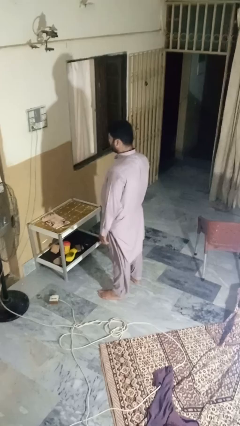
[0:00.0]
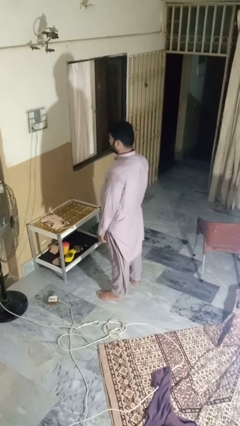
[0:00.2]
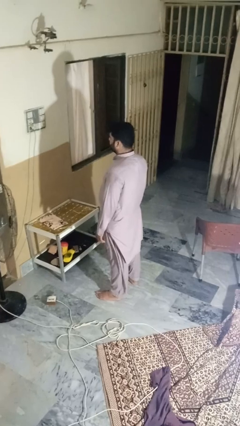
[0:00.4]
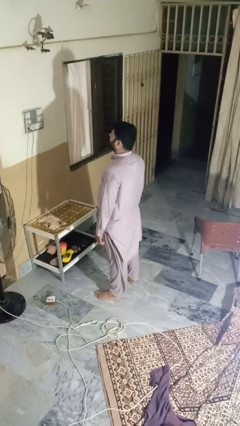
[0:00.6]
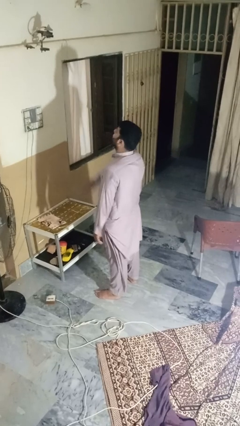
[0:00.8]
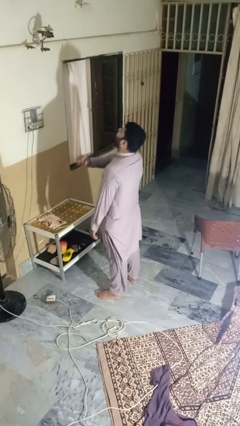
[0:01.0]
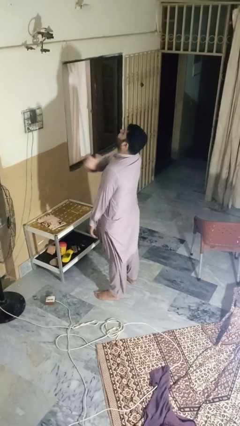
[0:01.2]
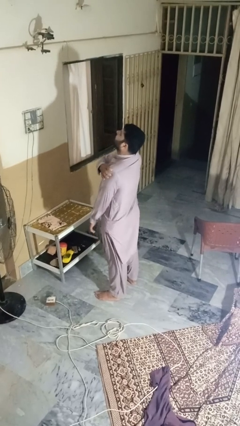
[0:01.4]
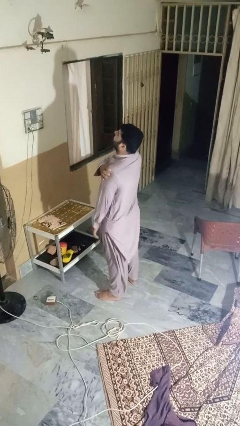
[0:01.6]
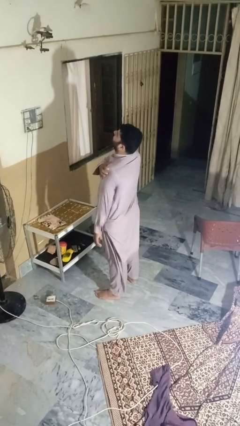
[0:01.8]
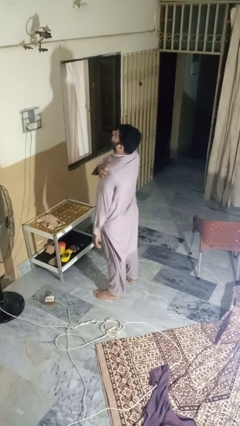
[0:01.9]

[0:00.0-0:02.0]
person shrugs

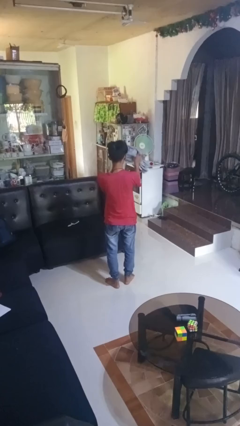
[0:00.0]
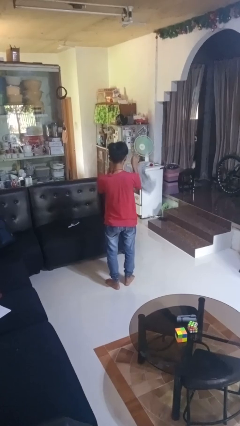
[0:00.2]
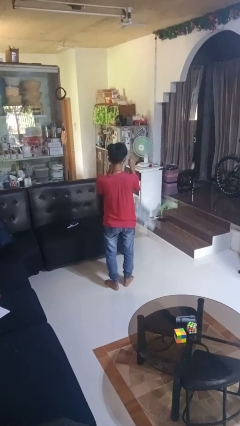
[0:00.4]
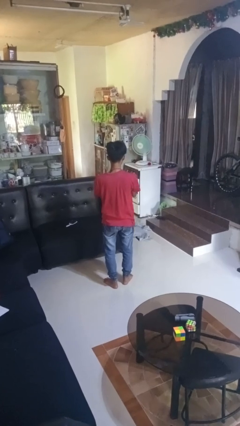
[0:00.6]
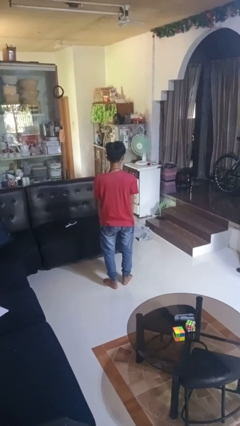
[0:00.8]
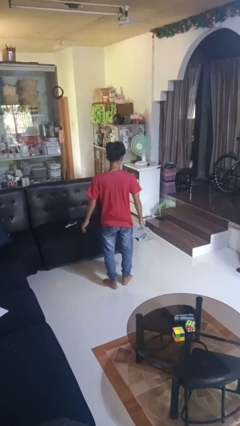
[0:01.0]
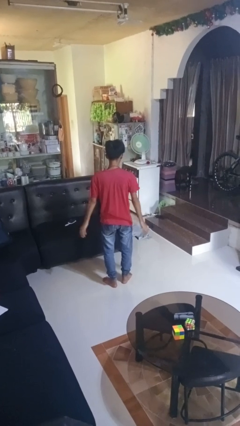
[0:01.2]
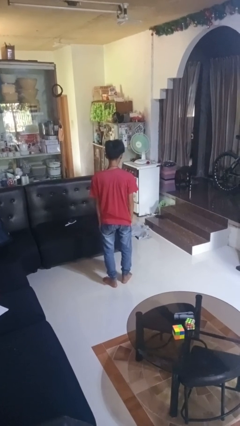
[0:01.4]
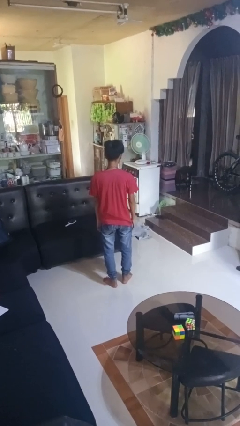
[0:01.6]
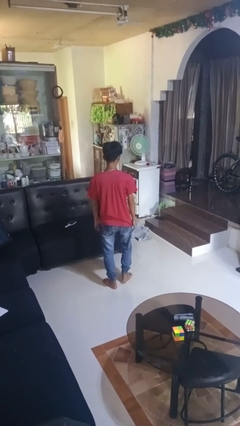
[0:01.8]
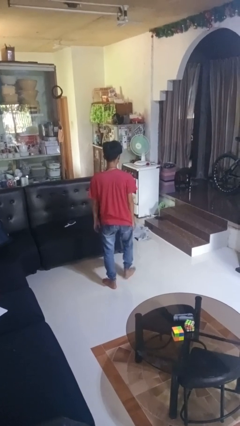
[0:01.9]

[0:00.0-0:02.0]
person throws object into air

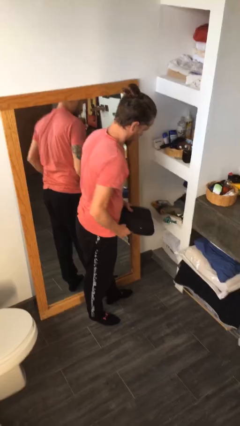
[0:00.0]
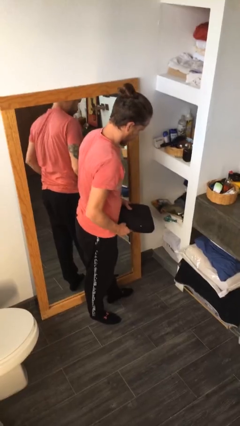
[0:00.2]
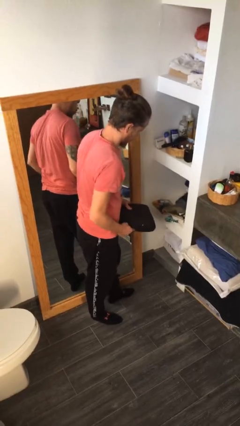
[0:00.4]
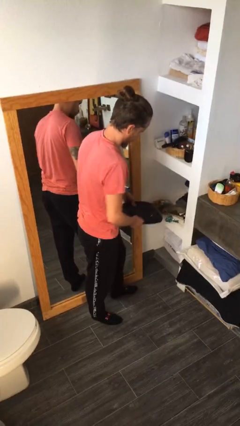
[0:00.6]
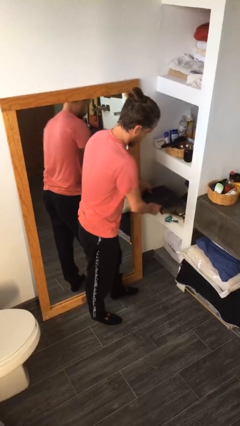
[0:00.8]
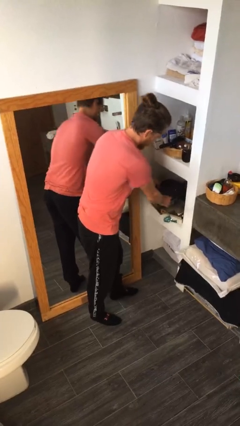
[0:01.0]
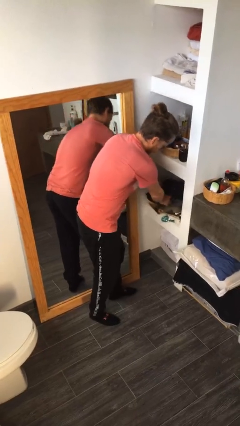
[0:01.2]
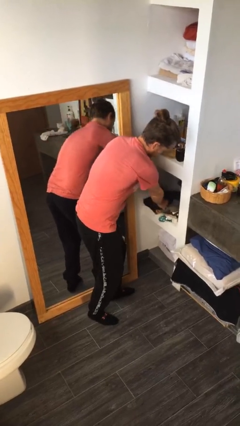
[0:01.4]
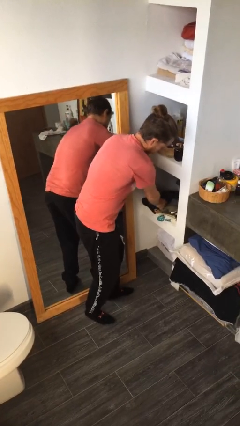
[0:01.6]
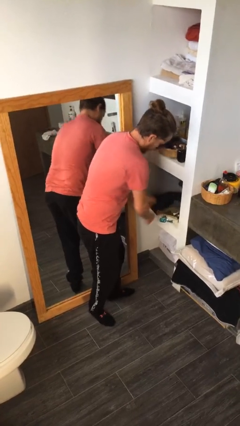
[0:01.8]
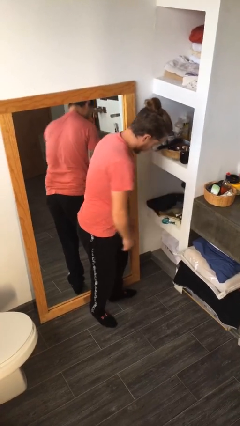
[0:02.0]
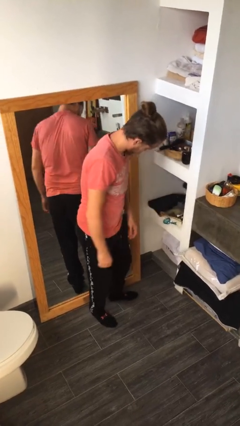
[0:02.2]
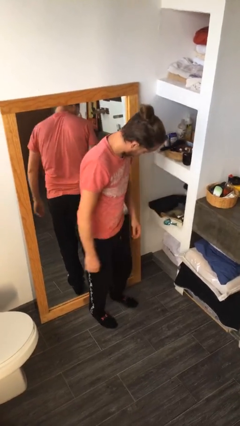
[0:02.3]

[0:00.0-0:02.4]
person puts down object into cabinet

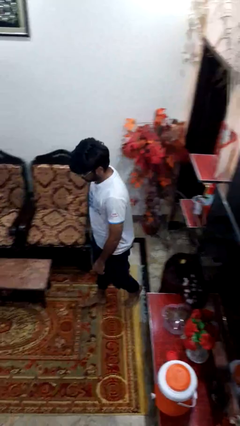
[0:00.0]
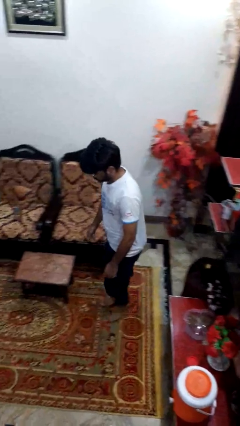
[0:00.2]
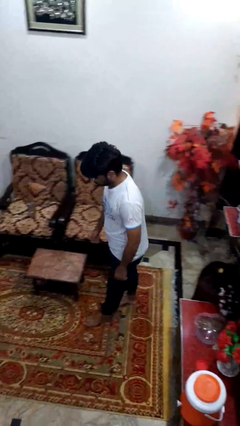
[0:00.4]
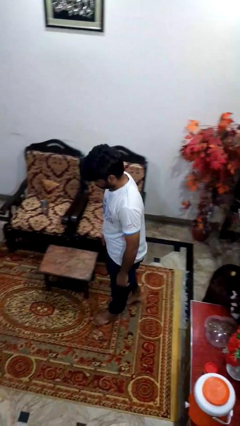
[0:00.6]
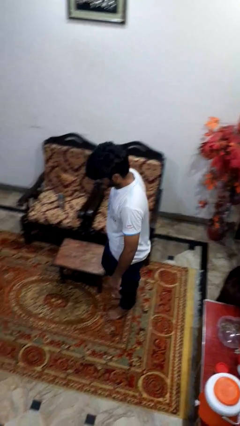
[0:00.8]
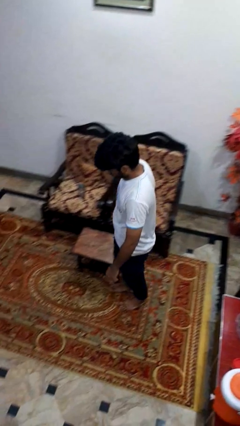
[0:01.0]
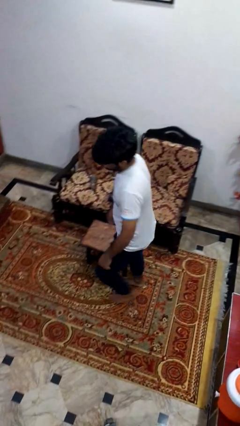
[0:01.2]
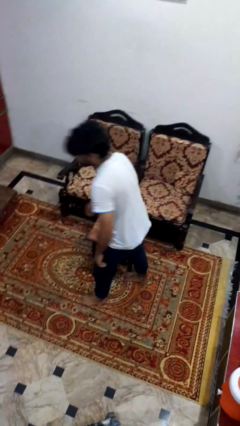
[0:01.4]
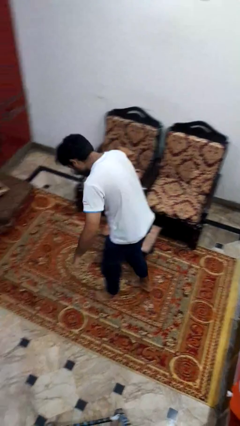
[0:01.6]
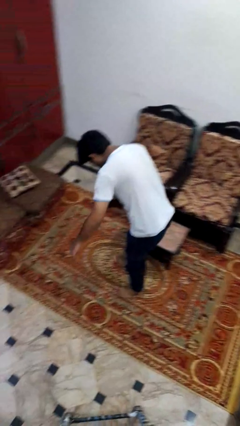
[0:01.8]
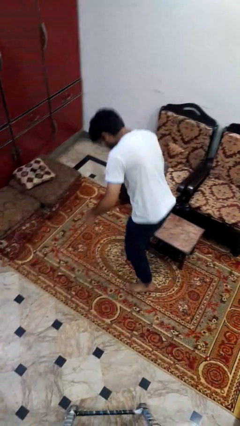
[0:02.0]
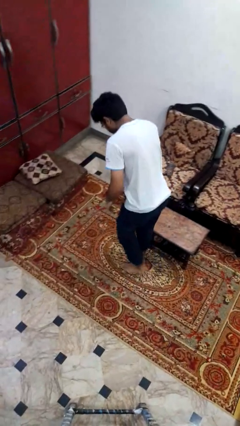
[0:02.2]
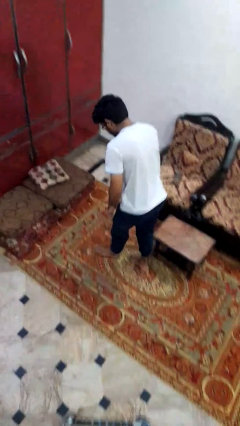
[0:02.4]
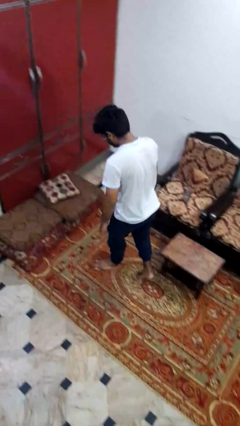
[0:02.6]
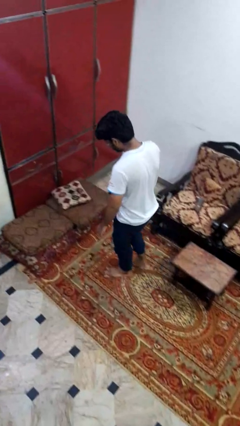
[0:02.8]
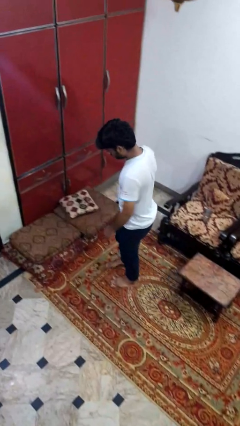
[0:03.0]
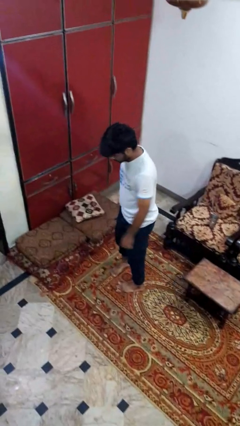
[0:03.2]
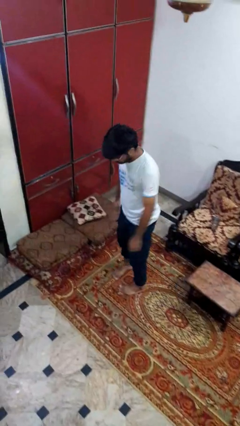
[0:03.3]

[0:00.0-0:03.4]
person bumps into table

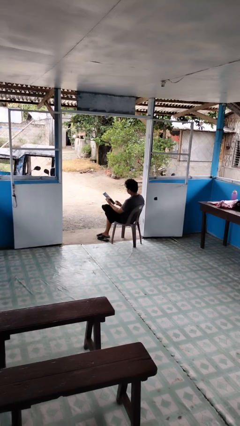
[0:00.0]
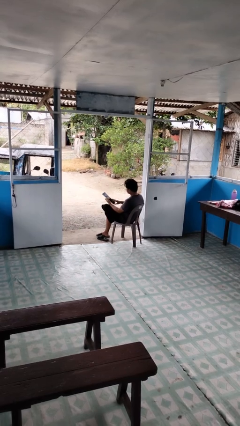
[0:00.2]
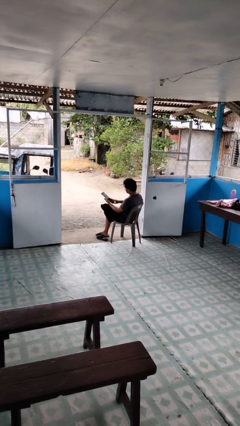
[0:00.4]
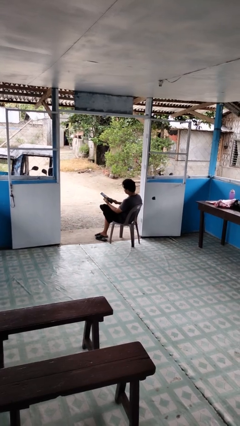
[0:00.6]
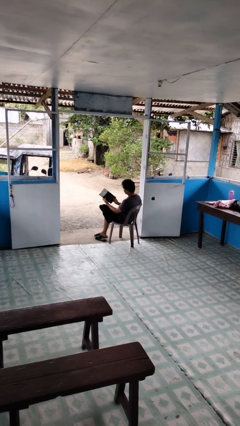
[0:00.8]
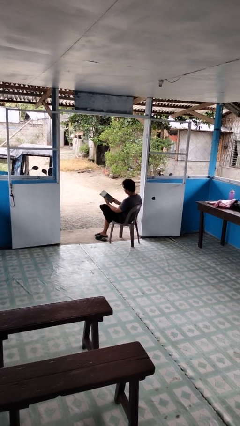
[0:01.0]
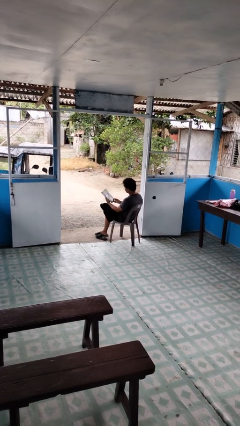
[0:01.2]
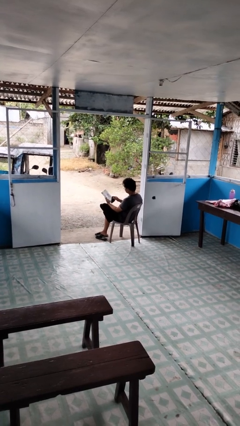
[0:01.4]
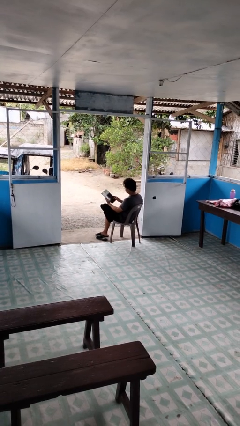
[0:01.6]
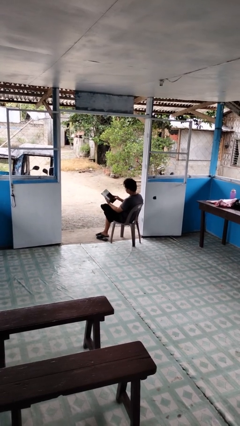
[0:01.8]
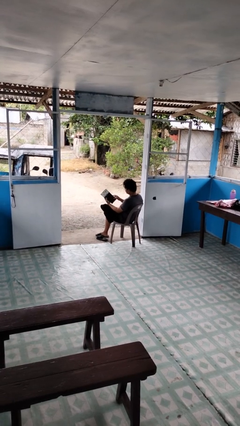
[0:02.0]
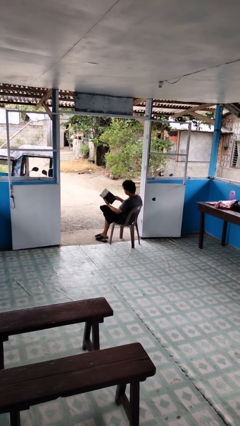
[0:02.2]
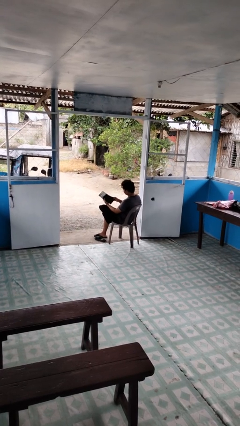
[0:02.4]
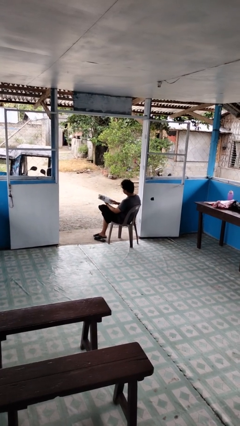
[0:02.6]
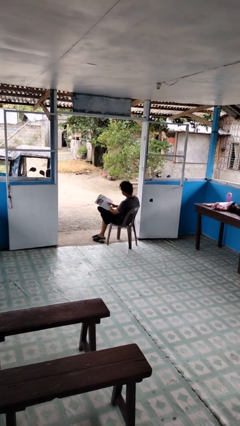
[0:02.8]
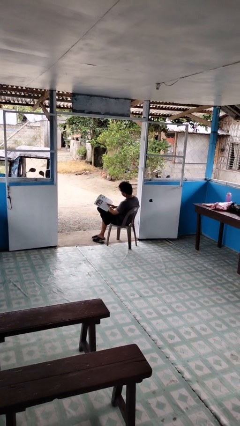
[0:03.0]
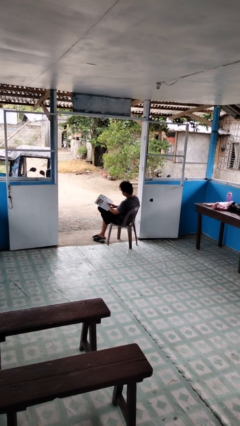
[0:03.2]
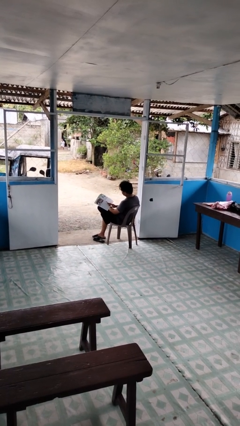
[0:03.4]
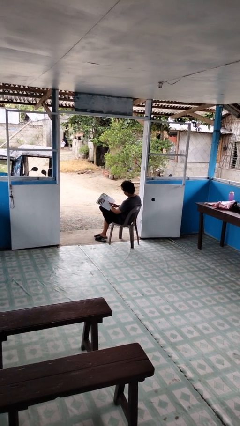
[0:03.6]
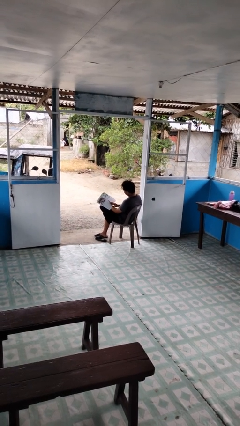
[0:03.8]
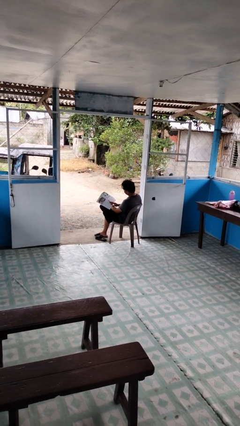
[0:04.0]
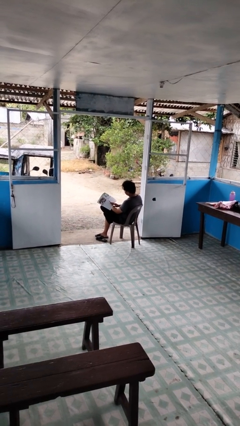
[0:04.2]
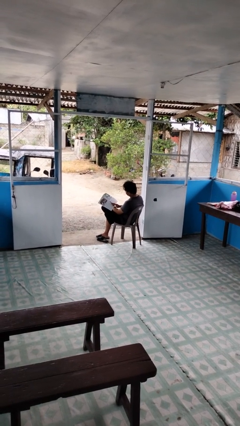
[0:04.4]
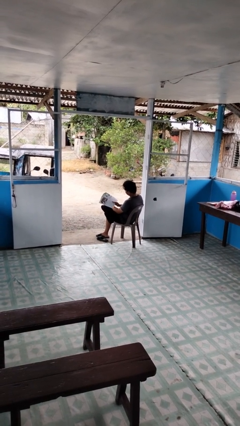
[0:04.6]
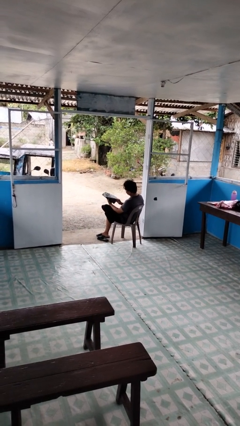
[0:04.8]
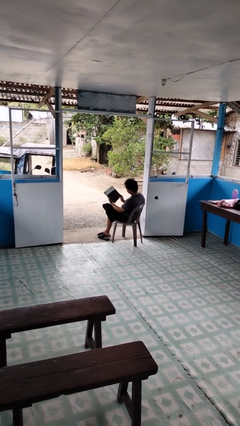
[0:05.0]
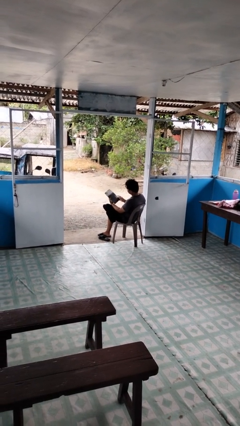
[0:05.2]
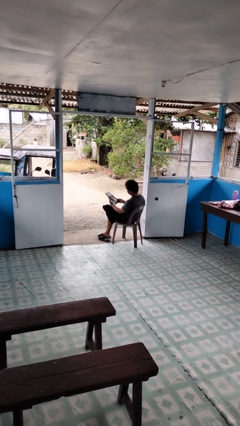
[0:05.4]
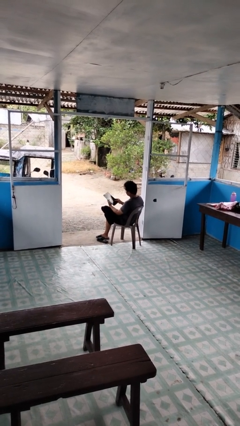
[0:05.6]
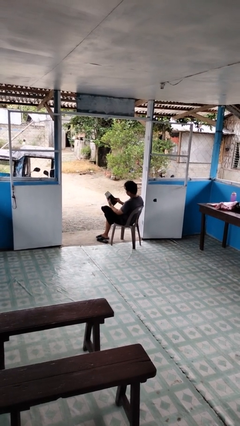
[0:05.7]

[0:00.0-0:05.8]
person reads magazine

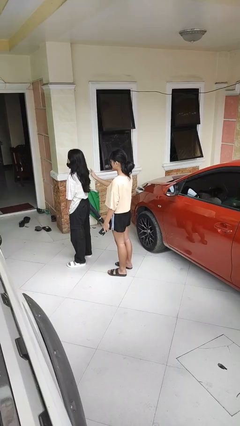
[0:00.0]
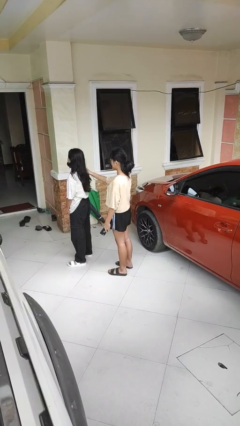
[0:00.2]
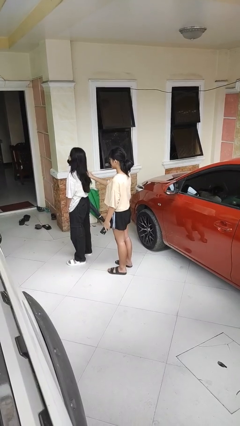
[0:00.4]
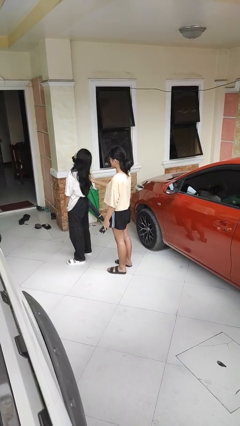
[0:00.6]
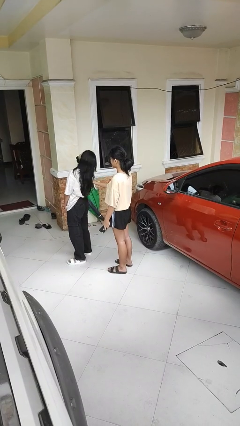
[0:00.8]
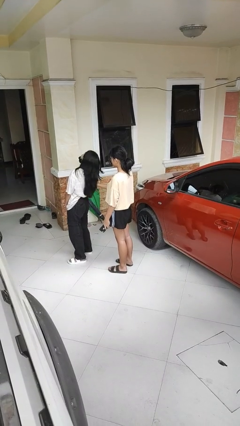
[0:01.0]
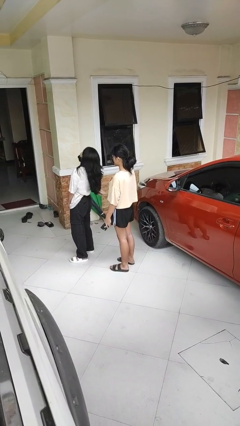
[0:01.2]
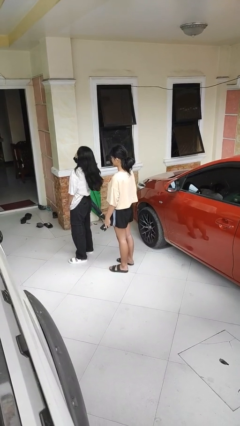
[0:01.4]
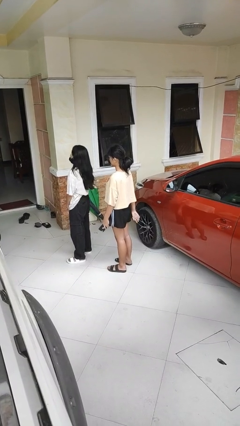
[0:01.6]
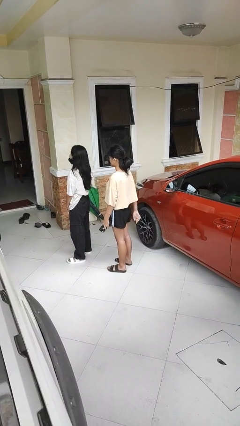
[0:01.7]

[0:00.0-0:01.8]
person grabs person by hair
